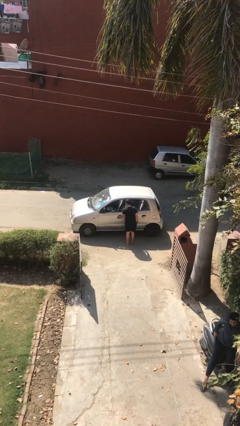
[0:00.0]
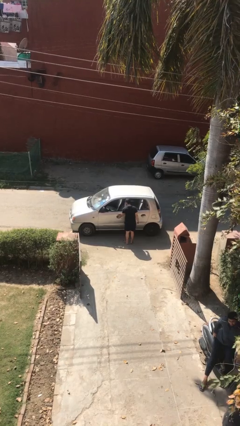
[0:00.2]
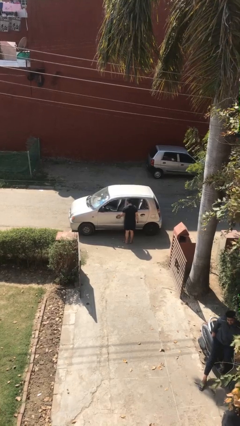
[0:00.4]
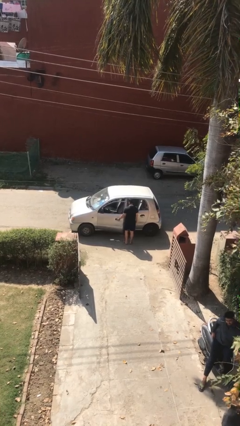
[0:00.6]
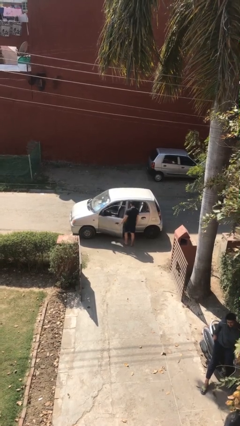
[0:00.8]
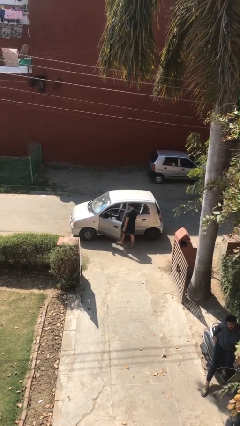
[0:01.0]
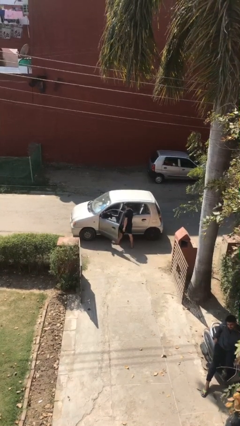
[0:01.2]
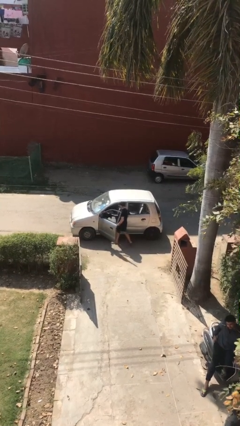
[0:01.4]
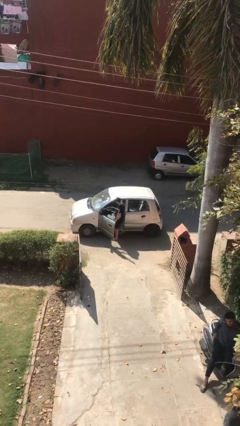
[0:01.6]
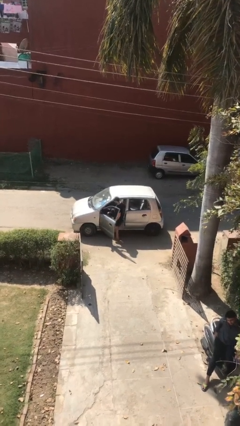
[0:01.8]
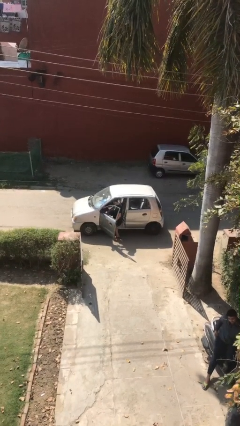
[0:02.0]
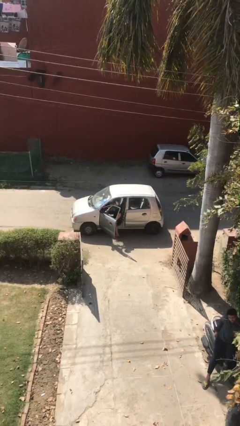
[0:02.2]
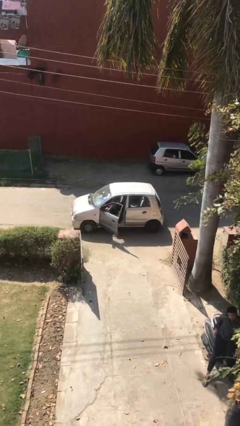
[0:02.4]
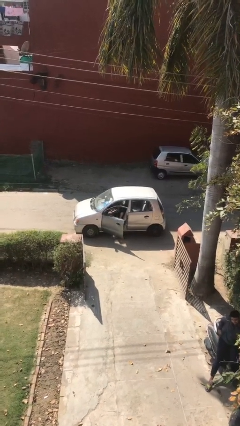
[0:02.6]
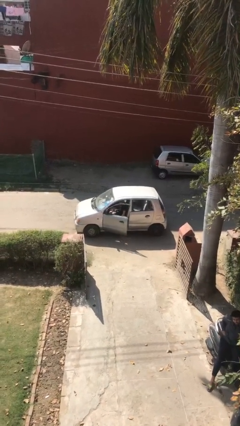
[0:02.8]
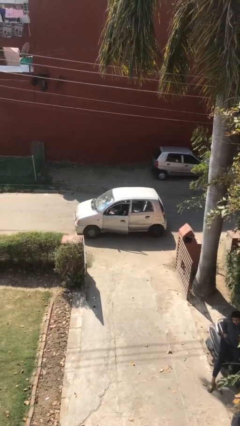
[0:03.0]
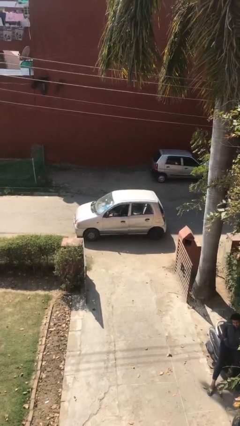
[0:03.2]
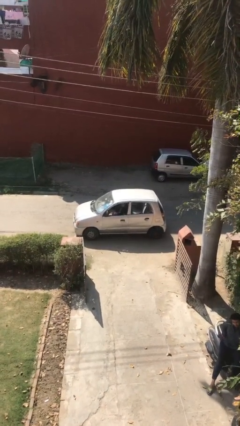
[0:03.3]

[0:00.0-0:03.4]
car picks up person

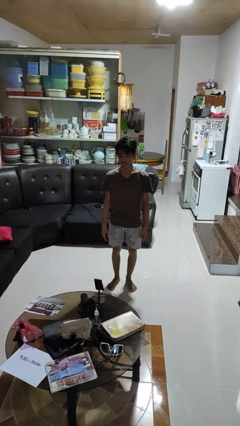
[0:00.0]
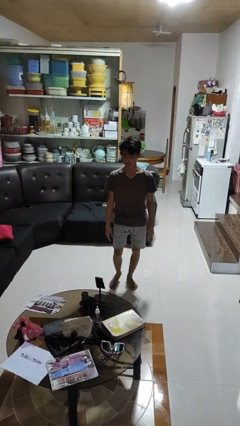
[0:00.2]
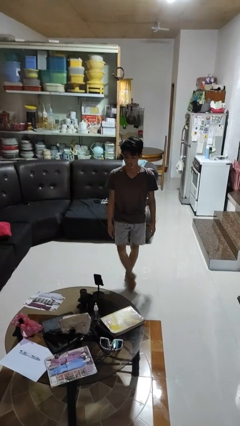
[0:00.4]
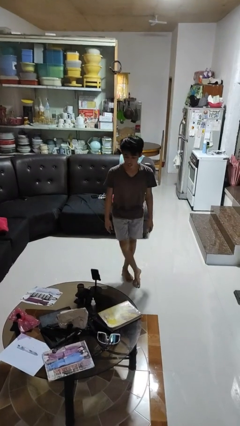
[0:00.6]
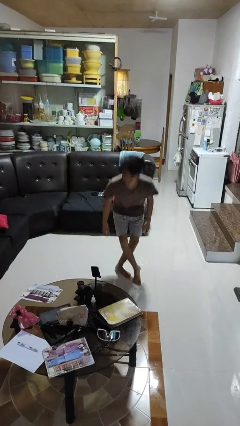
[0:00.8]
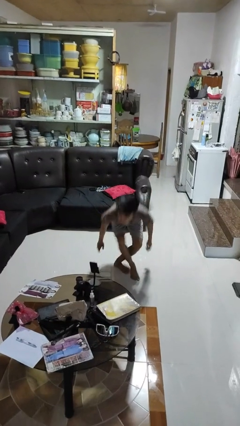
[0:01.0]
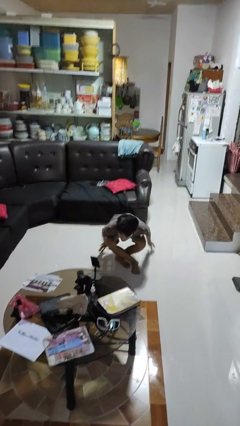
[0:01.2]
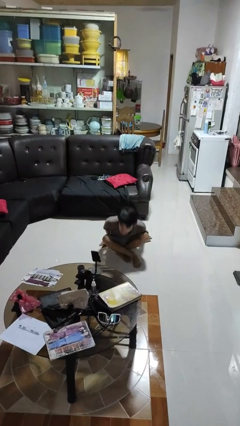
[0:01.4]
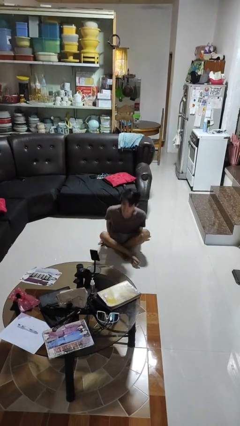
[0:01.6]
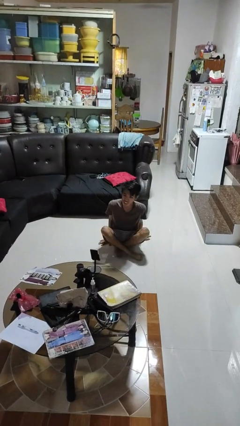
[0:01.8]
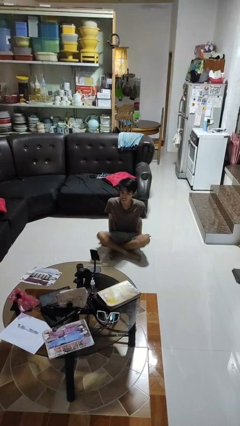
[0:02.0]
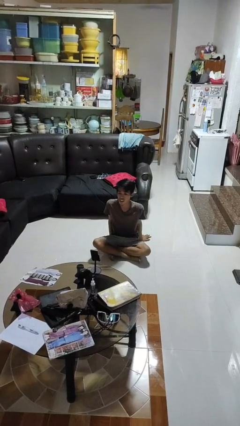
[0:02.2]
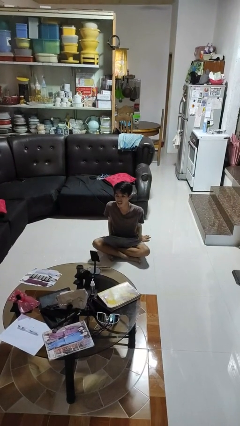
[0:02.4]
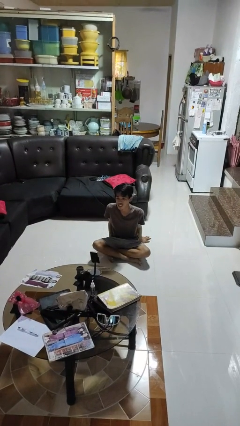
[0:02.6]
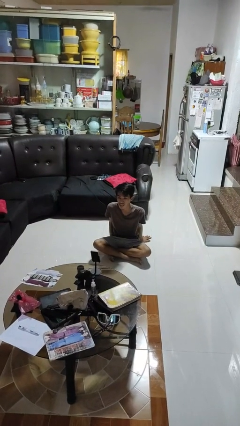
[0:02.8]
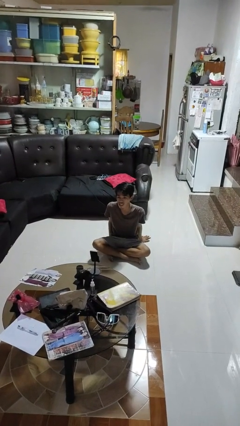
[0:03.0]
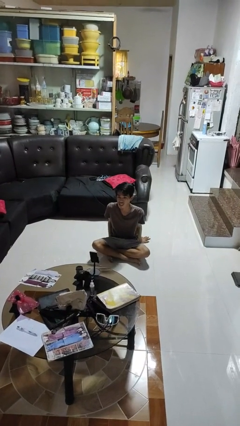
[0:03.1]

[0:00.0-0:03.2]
person sits crisscross

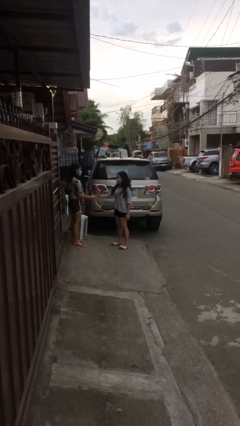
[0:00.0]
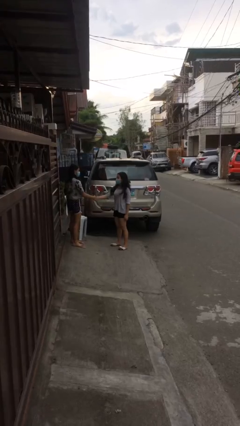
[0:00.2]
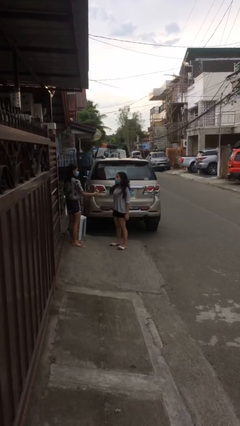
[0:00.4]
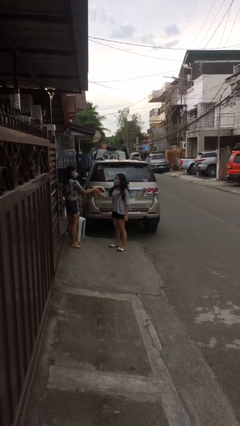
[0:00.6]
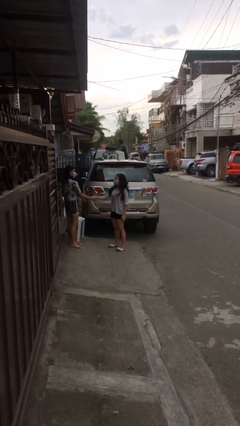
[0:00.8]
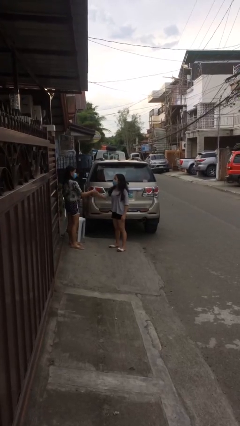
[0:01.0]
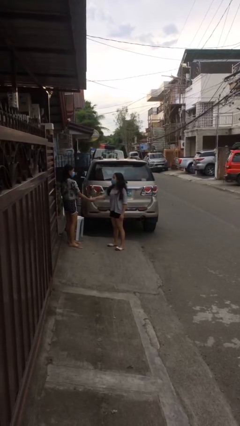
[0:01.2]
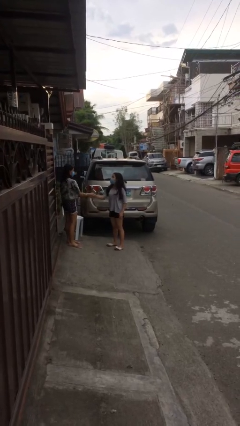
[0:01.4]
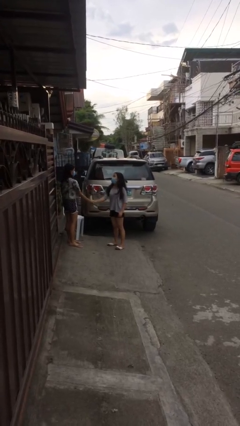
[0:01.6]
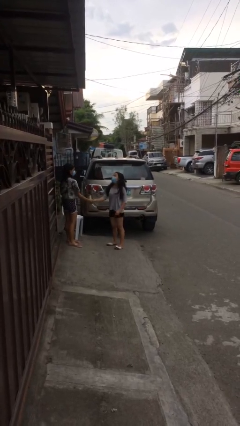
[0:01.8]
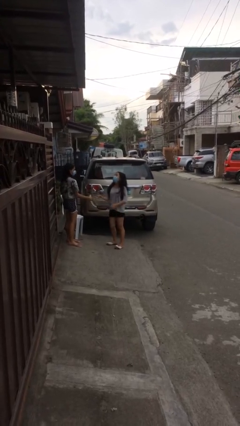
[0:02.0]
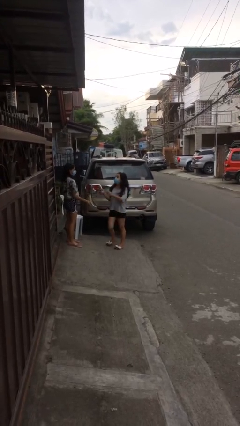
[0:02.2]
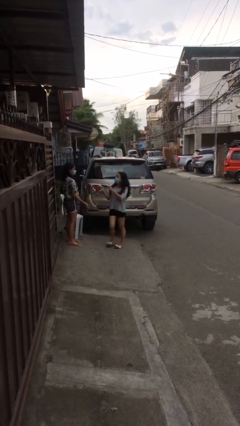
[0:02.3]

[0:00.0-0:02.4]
person shakes hand

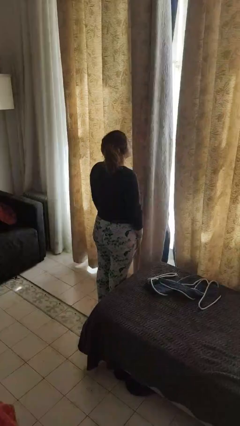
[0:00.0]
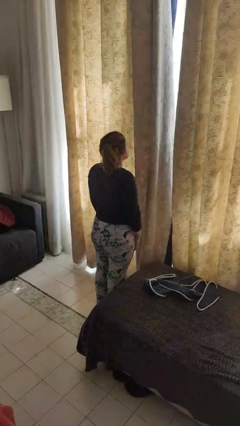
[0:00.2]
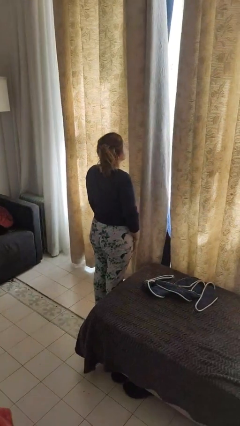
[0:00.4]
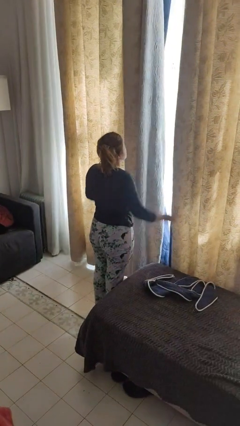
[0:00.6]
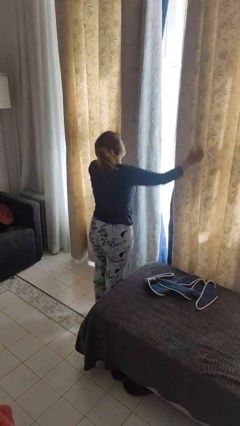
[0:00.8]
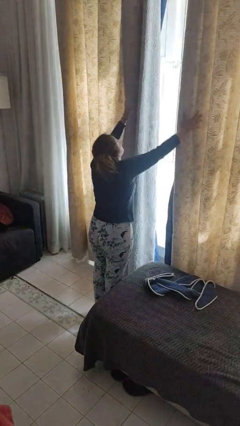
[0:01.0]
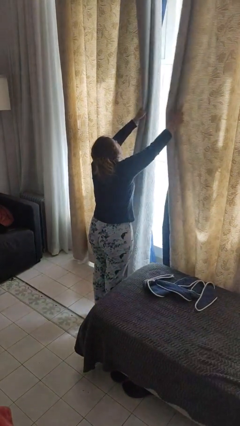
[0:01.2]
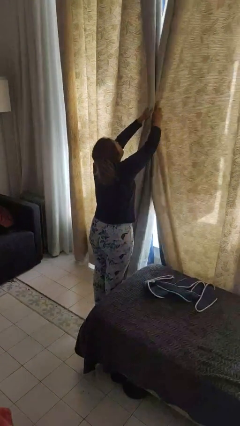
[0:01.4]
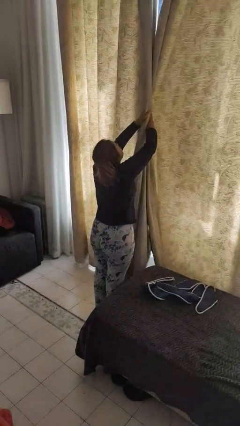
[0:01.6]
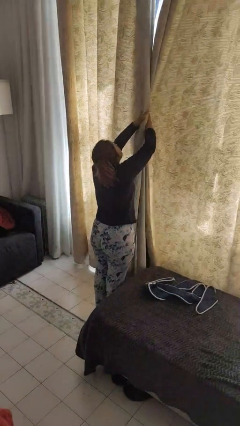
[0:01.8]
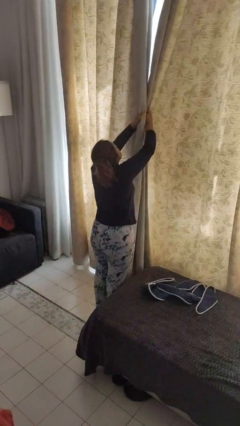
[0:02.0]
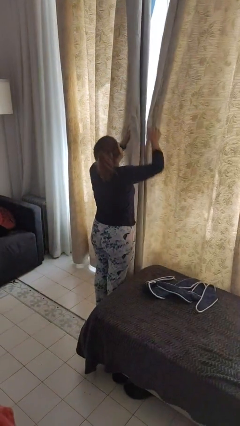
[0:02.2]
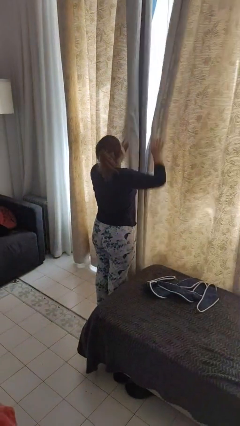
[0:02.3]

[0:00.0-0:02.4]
person closes curtains

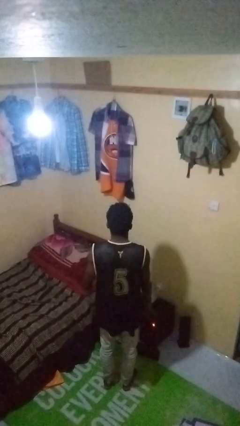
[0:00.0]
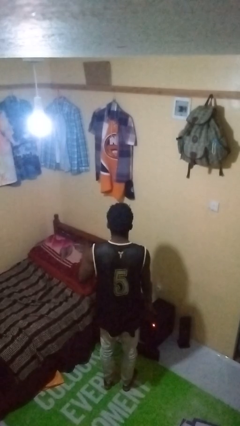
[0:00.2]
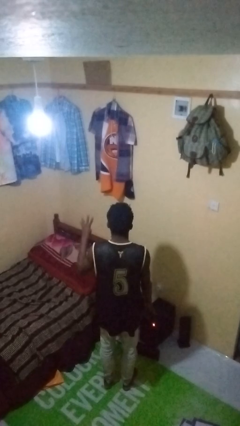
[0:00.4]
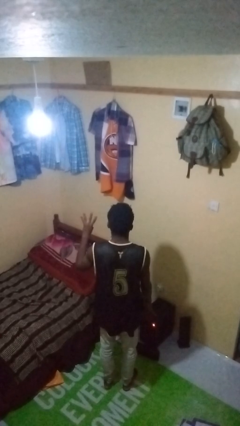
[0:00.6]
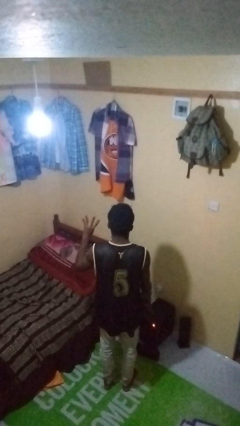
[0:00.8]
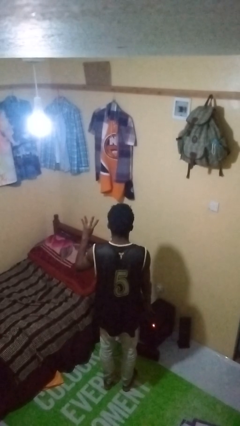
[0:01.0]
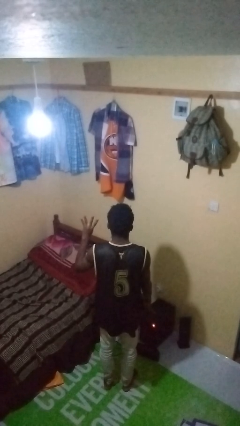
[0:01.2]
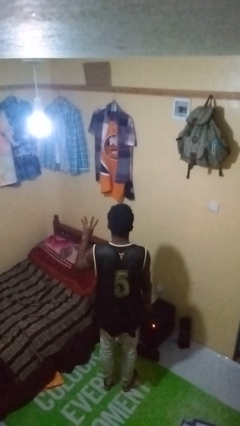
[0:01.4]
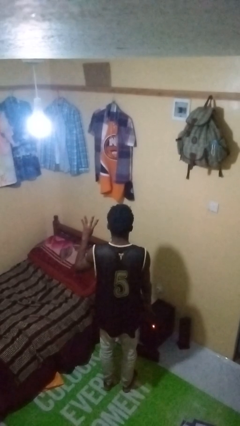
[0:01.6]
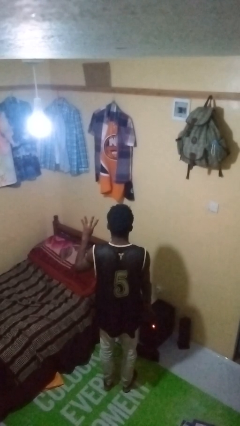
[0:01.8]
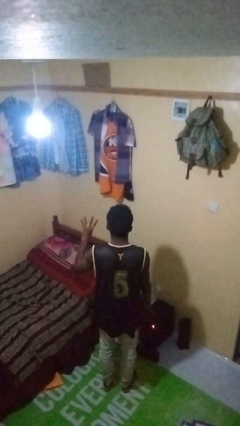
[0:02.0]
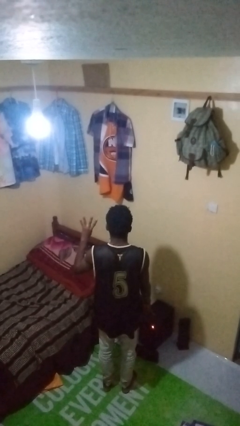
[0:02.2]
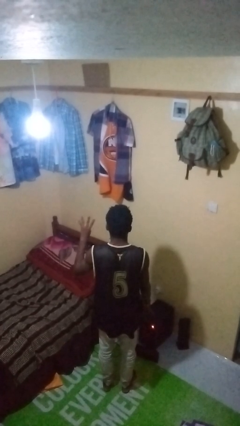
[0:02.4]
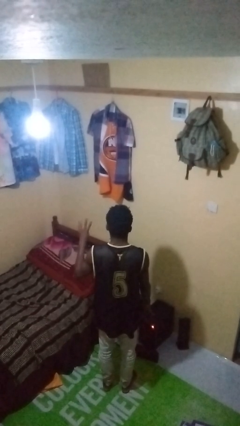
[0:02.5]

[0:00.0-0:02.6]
person gestures number four

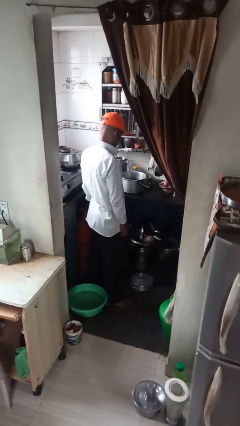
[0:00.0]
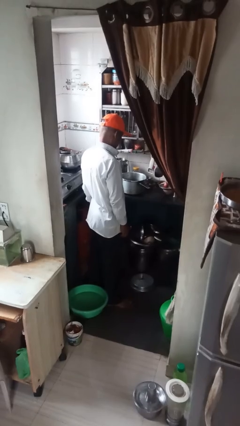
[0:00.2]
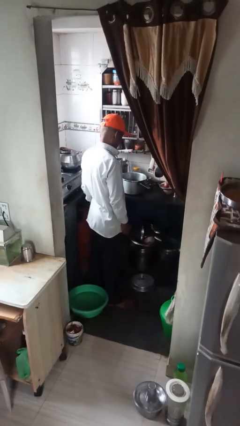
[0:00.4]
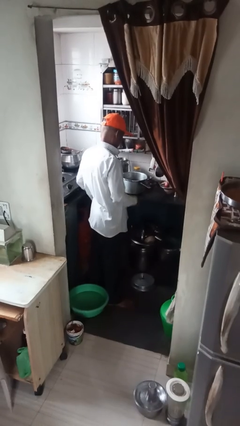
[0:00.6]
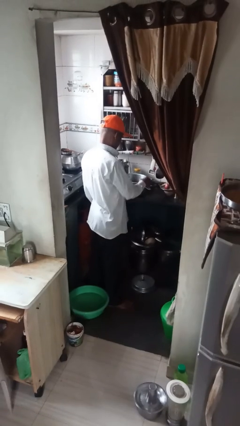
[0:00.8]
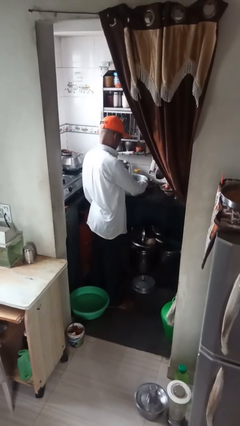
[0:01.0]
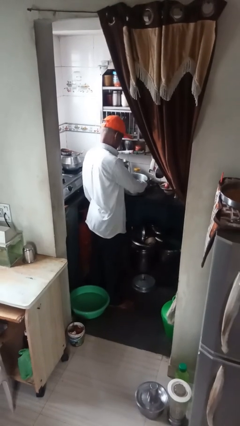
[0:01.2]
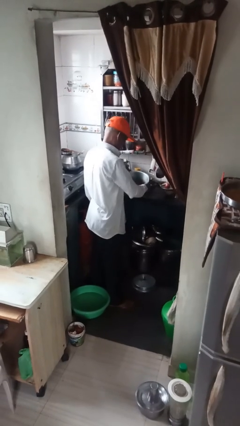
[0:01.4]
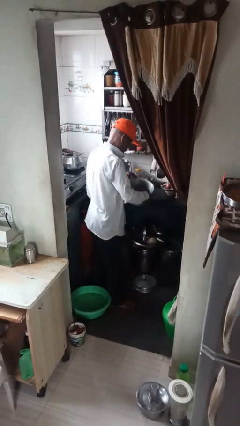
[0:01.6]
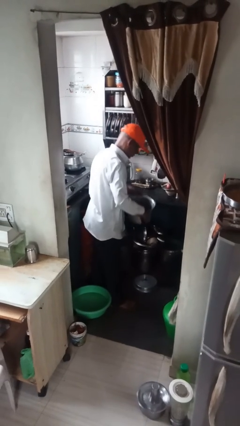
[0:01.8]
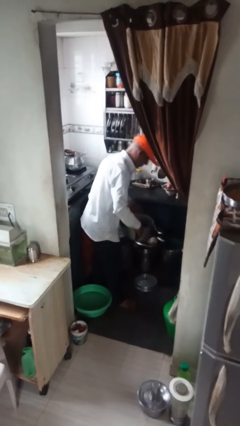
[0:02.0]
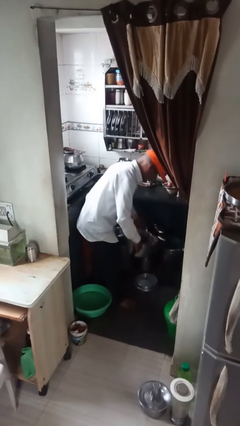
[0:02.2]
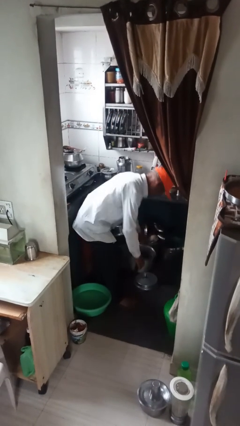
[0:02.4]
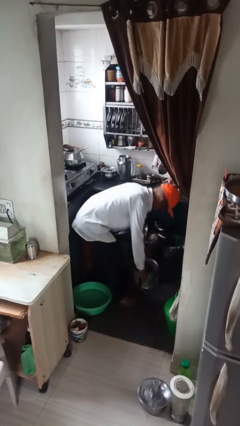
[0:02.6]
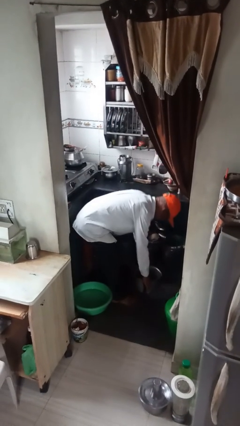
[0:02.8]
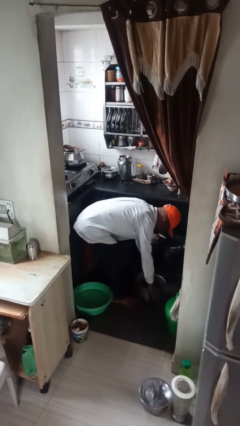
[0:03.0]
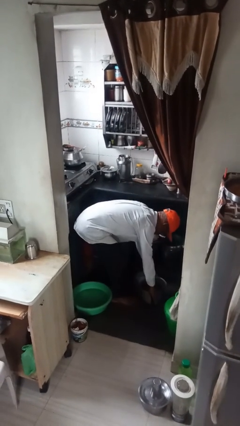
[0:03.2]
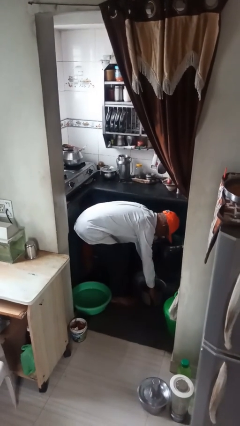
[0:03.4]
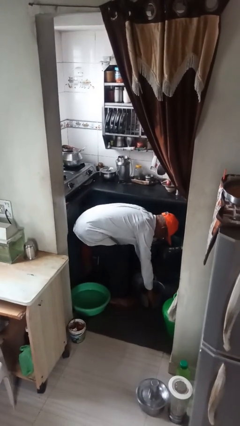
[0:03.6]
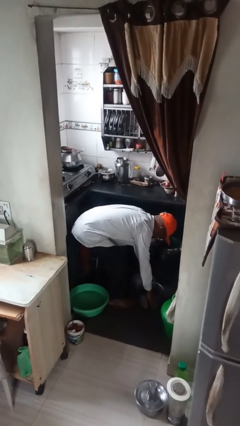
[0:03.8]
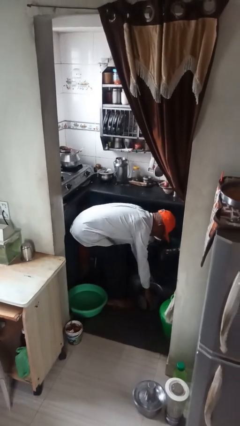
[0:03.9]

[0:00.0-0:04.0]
person puts down object on countertop
